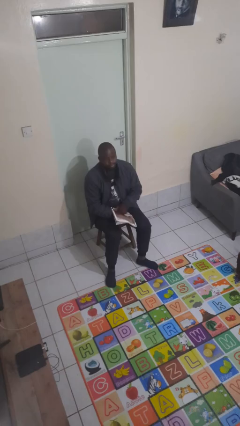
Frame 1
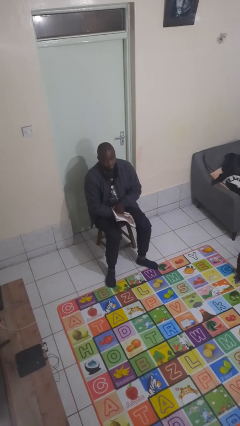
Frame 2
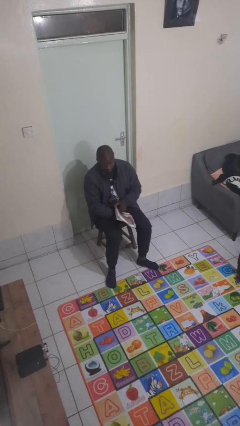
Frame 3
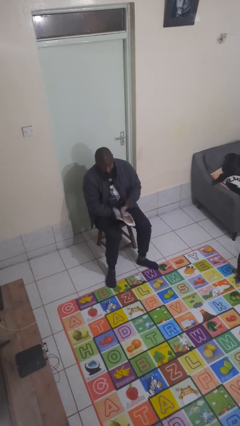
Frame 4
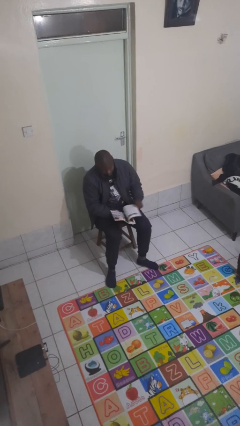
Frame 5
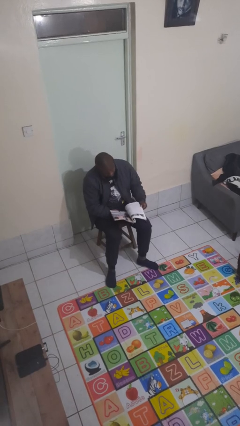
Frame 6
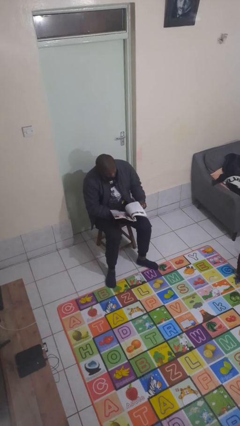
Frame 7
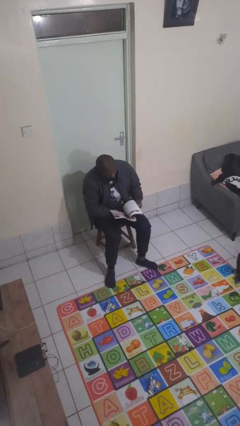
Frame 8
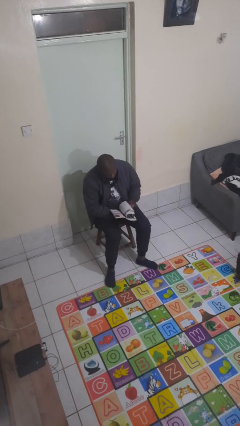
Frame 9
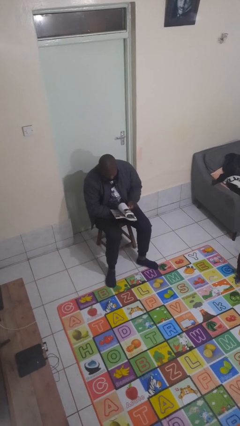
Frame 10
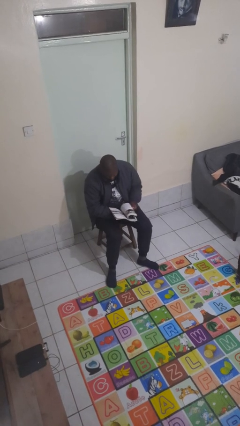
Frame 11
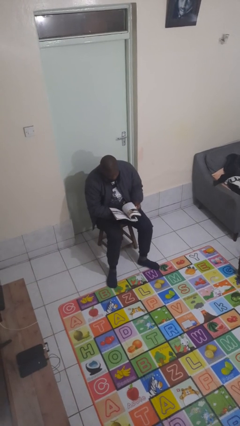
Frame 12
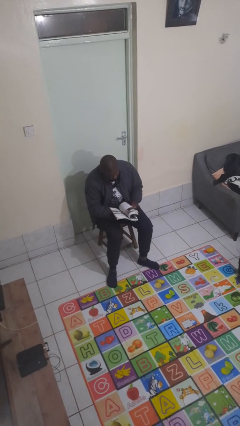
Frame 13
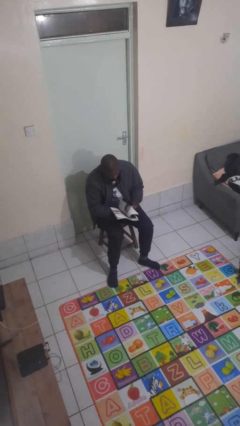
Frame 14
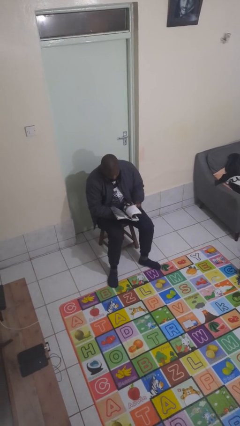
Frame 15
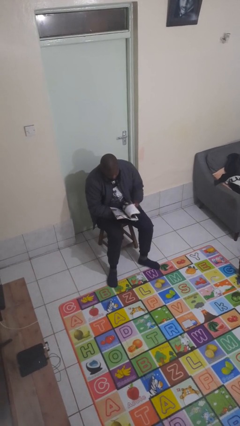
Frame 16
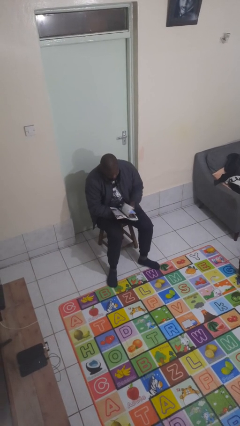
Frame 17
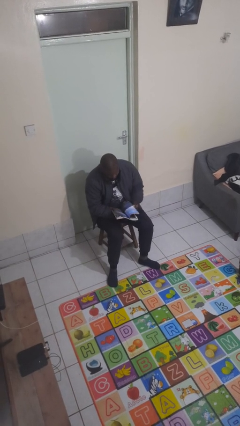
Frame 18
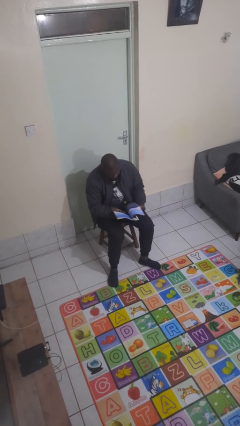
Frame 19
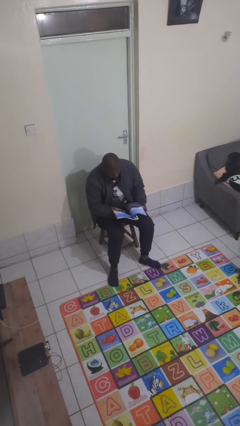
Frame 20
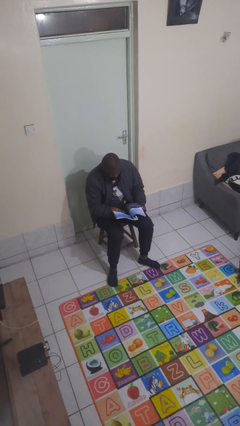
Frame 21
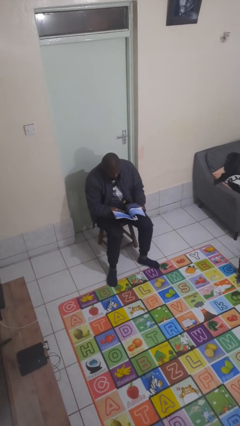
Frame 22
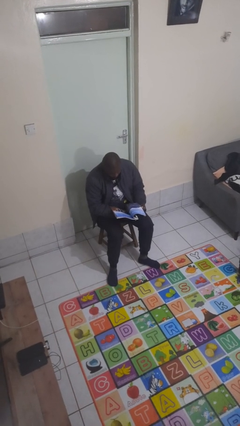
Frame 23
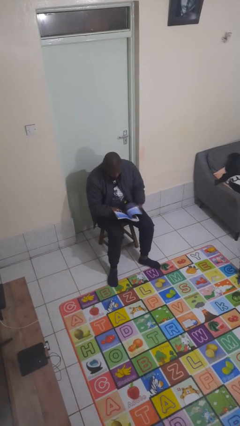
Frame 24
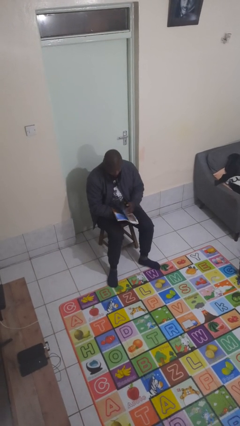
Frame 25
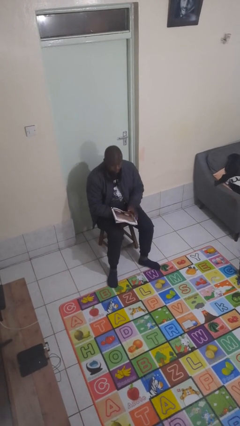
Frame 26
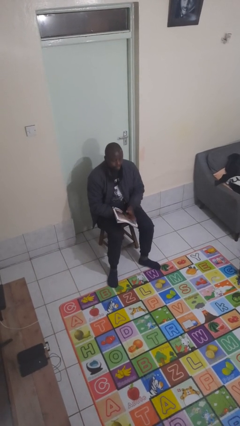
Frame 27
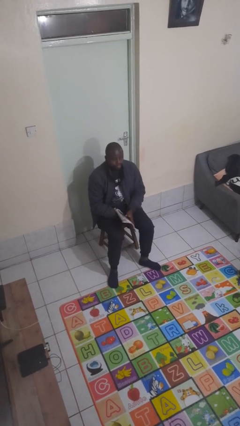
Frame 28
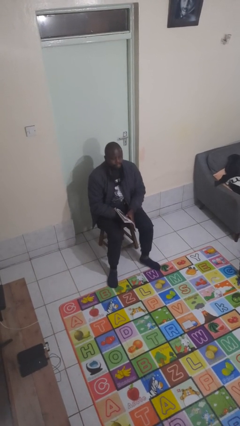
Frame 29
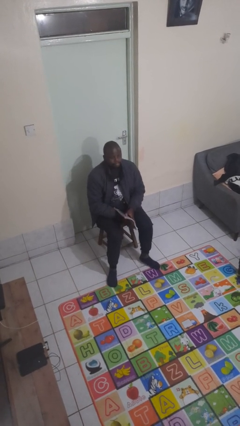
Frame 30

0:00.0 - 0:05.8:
person reads magazine

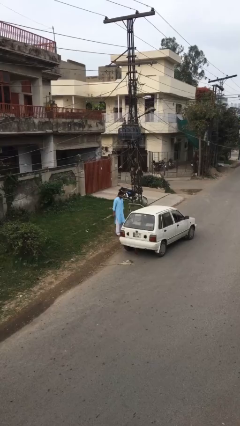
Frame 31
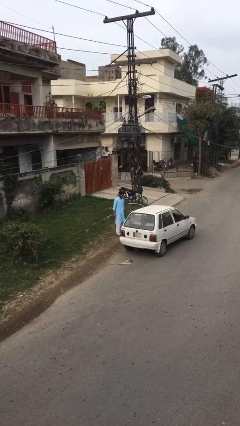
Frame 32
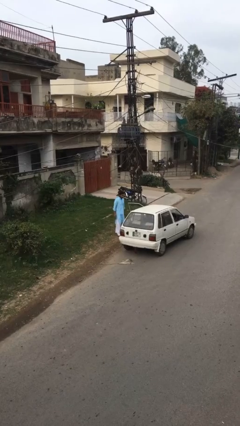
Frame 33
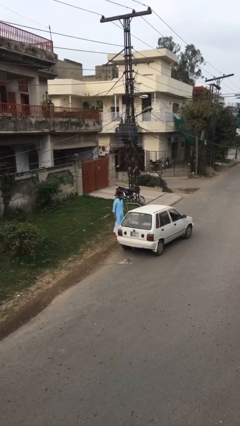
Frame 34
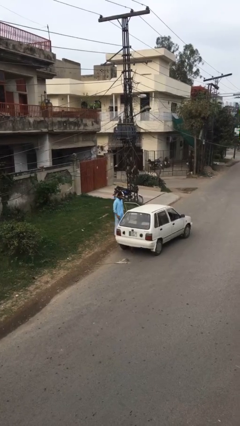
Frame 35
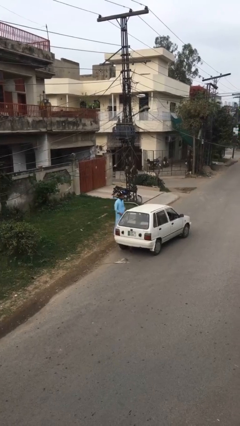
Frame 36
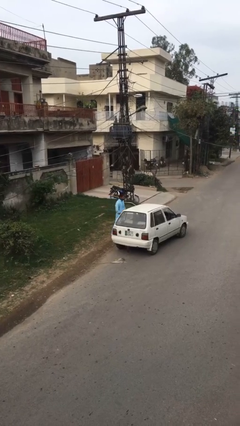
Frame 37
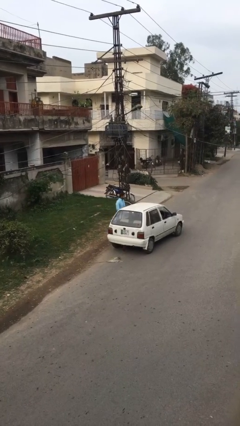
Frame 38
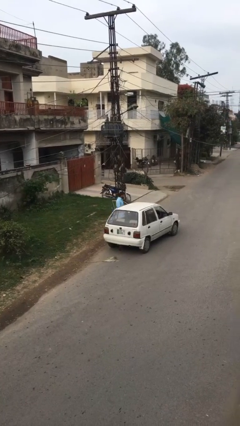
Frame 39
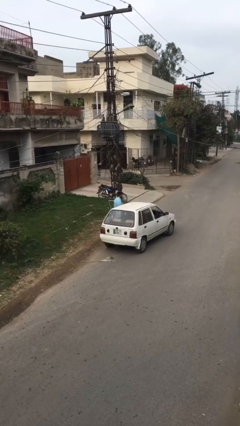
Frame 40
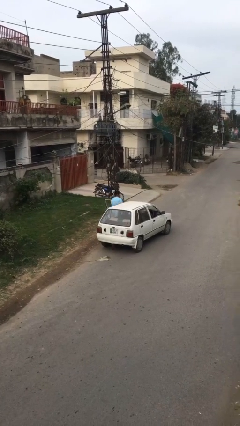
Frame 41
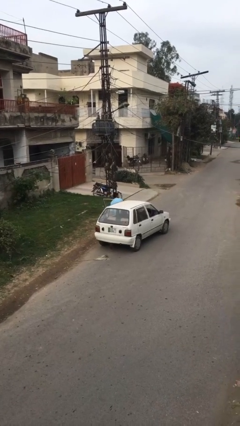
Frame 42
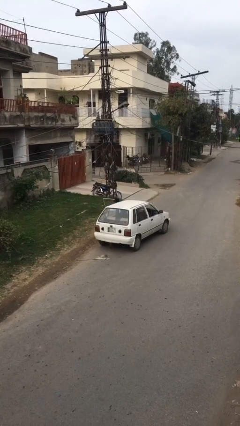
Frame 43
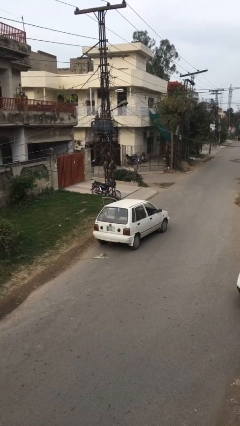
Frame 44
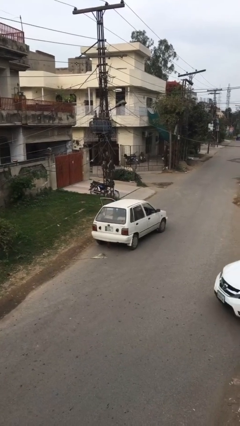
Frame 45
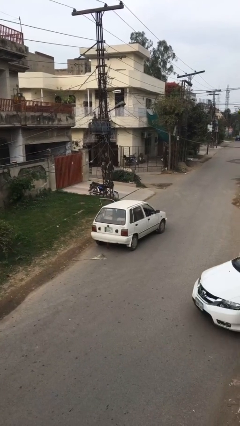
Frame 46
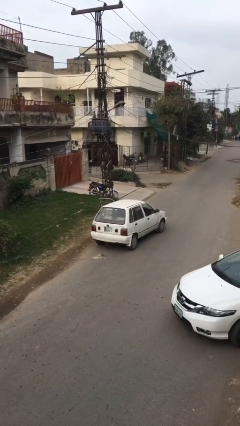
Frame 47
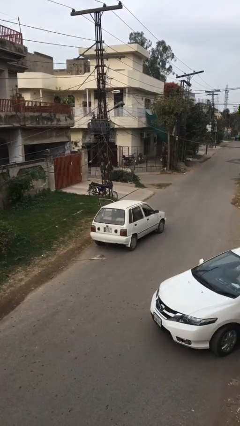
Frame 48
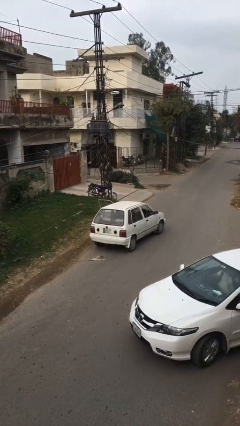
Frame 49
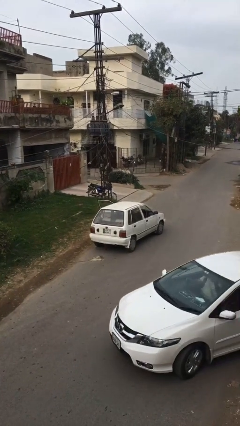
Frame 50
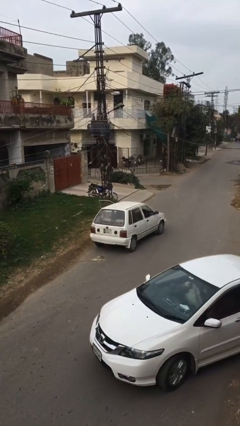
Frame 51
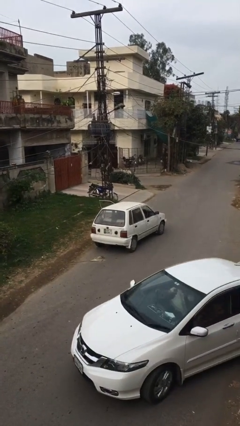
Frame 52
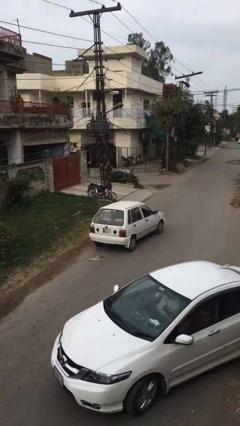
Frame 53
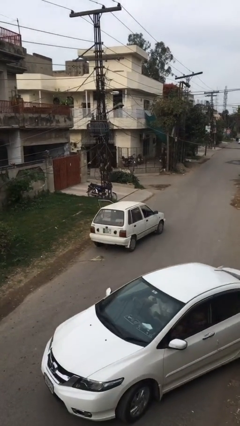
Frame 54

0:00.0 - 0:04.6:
person enters car

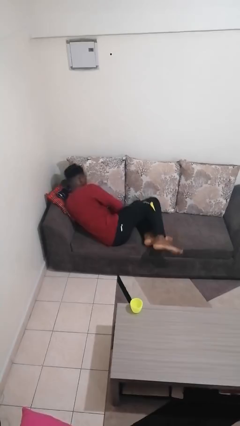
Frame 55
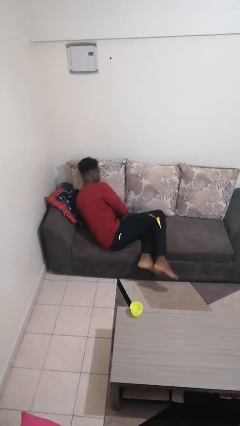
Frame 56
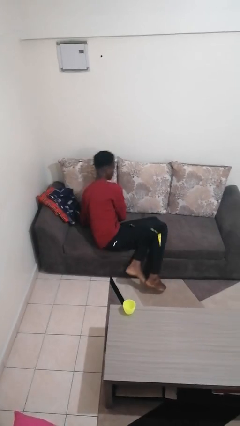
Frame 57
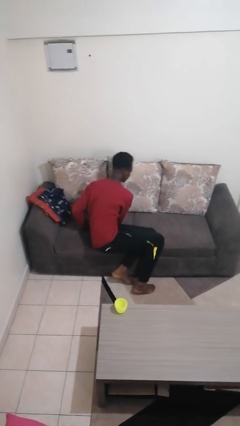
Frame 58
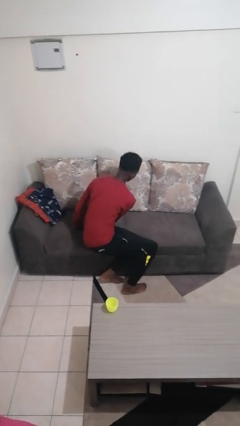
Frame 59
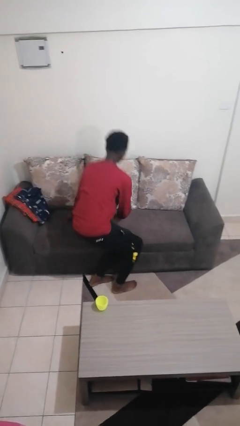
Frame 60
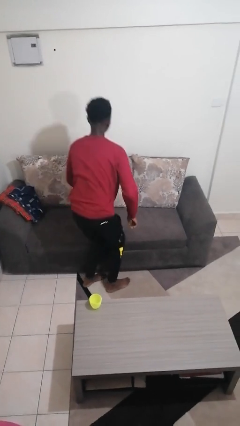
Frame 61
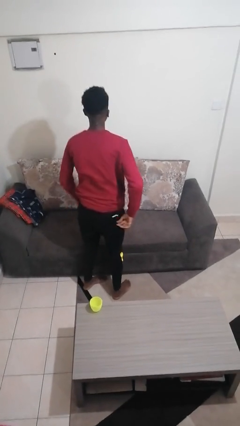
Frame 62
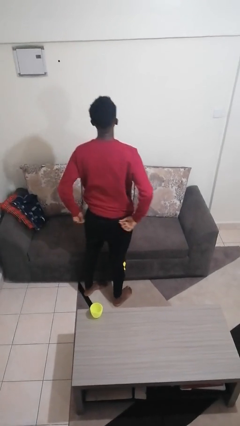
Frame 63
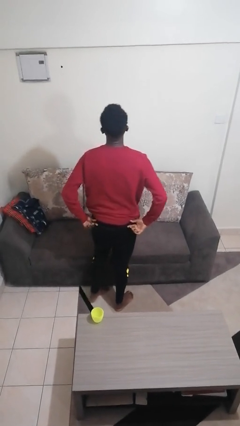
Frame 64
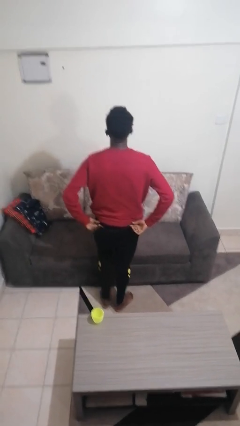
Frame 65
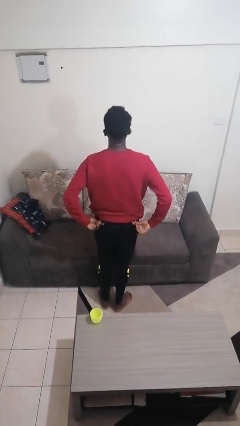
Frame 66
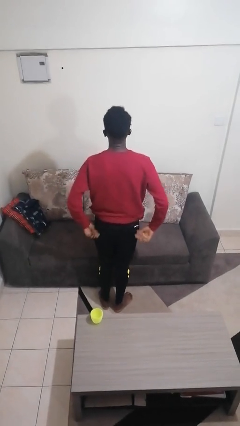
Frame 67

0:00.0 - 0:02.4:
person stands up

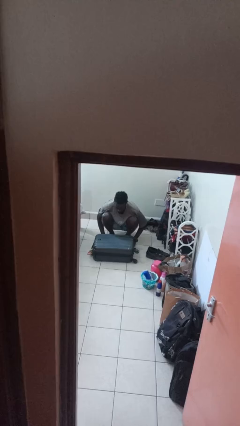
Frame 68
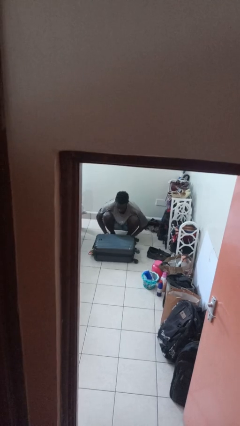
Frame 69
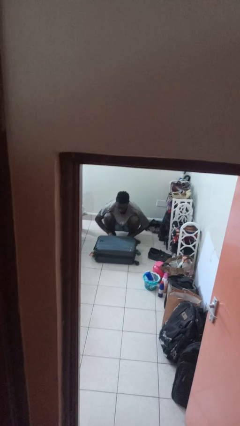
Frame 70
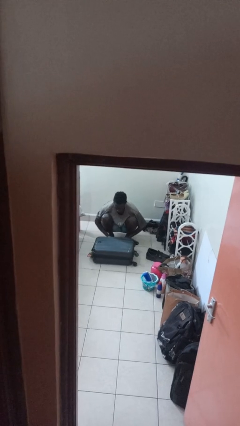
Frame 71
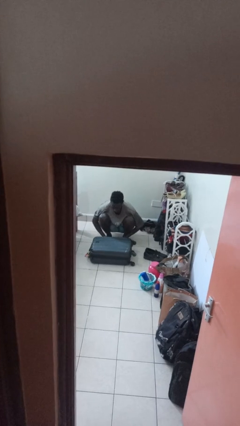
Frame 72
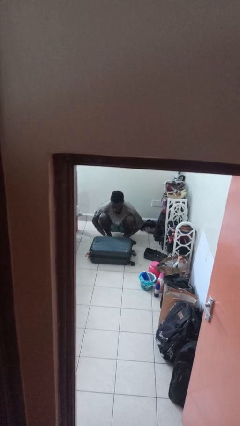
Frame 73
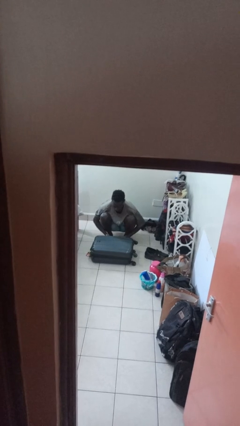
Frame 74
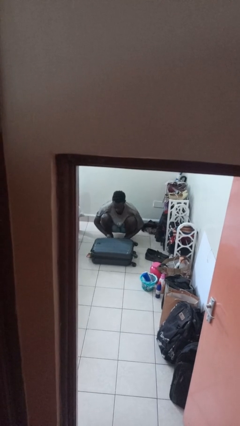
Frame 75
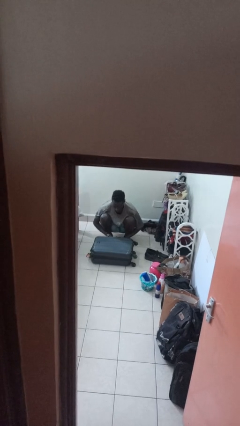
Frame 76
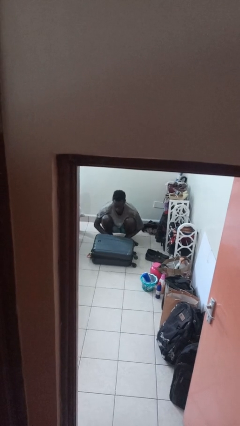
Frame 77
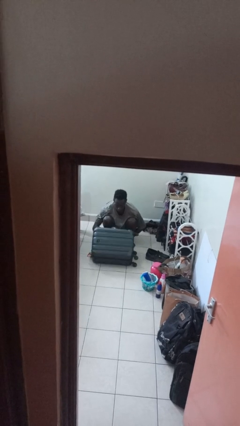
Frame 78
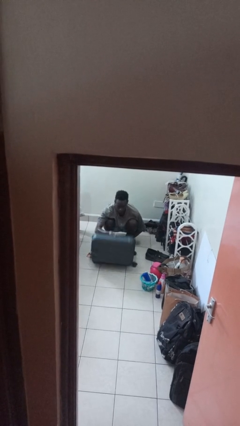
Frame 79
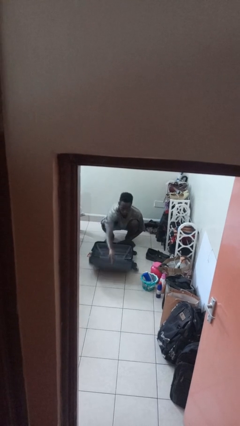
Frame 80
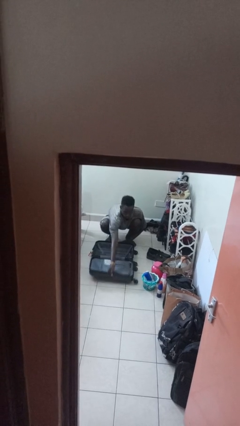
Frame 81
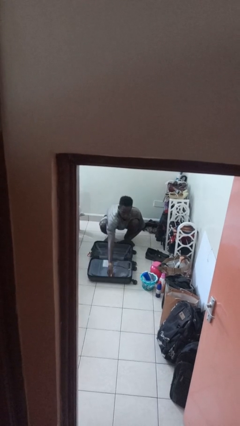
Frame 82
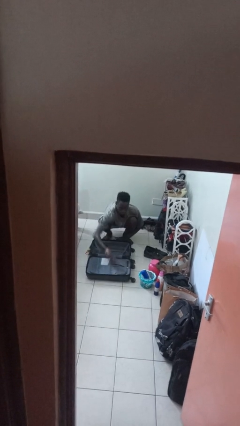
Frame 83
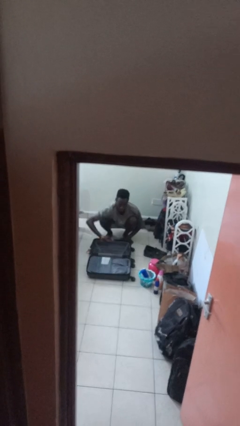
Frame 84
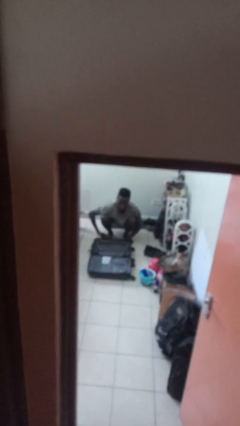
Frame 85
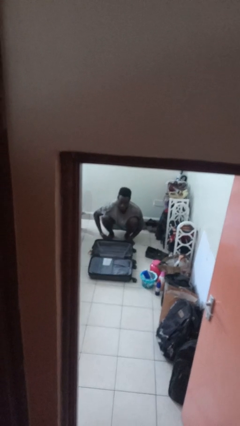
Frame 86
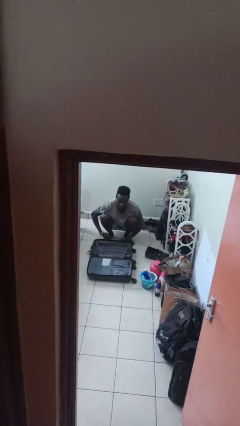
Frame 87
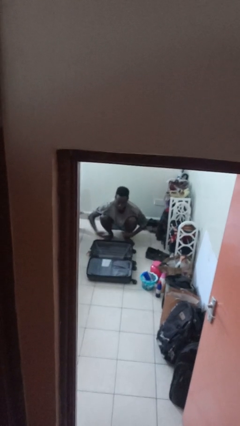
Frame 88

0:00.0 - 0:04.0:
person opens suitcase

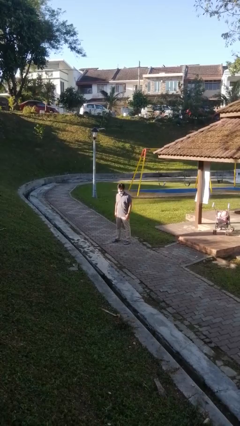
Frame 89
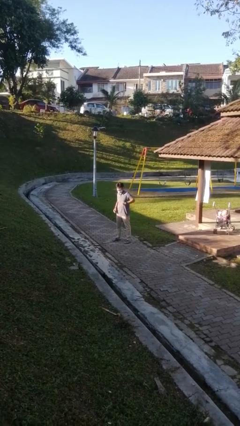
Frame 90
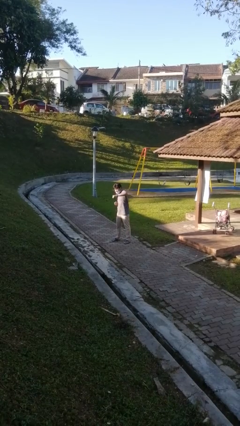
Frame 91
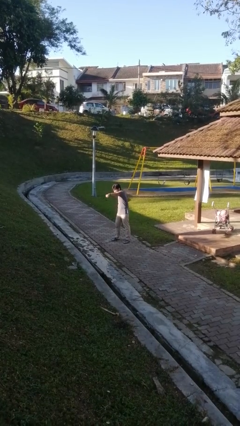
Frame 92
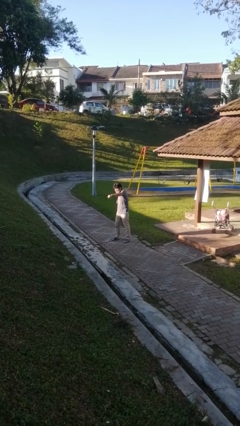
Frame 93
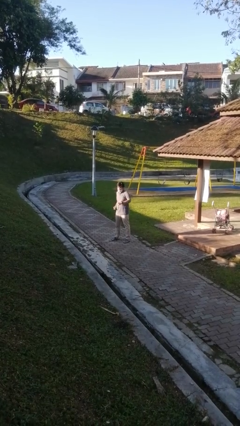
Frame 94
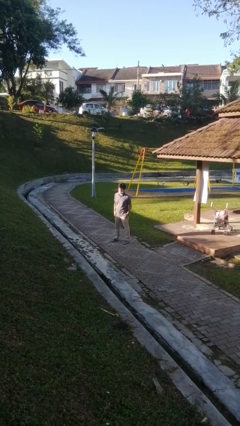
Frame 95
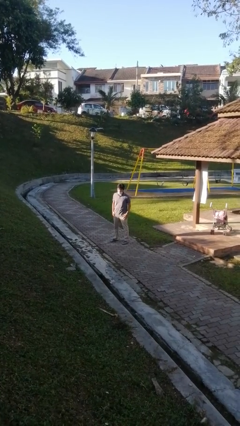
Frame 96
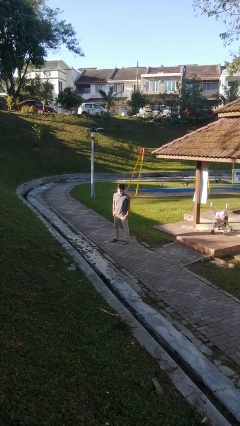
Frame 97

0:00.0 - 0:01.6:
person punches
